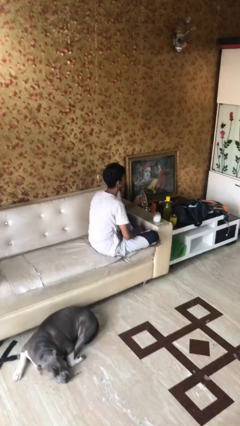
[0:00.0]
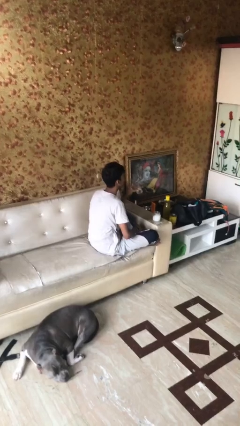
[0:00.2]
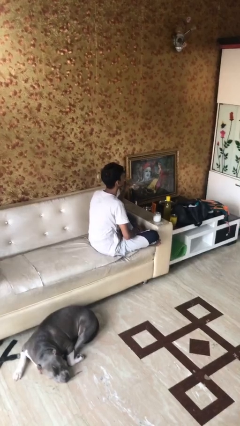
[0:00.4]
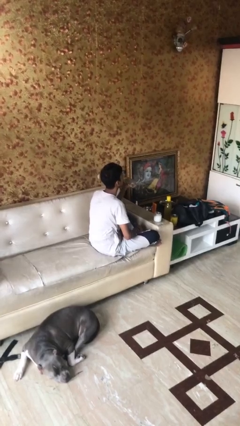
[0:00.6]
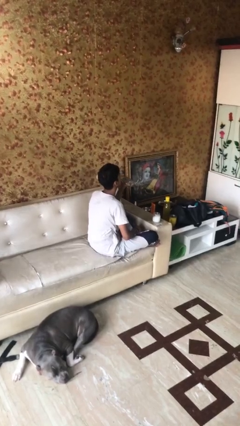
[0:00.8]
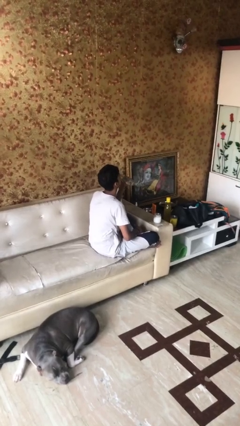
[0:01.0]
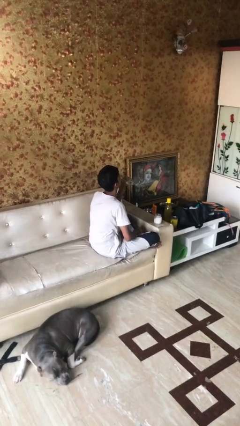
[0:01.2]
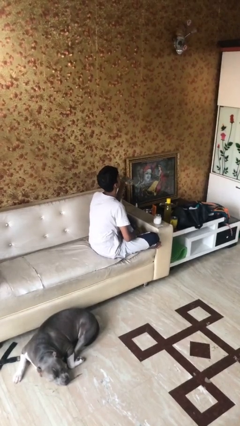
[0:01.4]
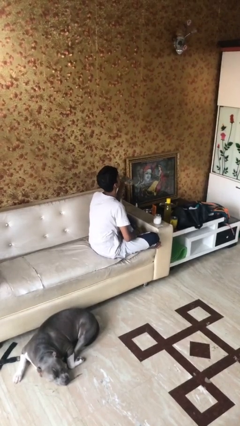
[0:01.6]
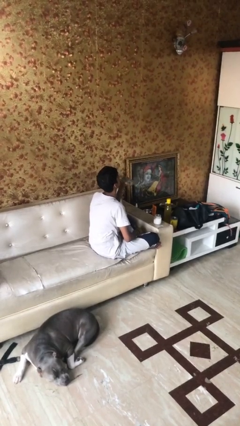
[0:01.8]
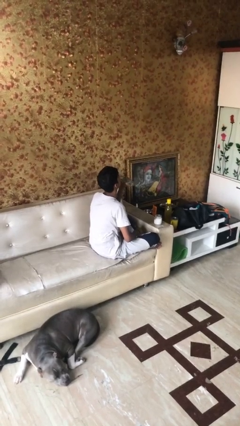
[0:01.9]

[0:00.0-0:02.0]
person drinks from cup

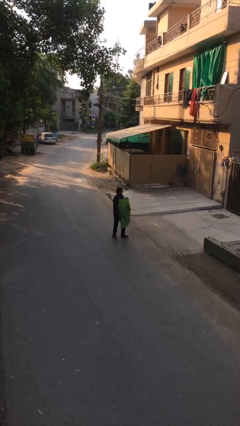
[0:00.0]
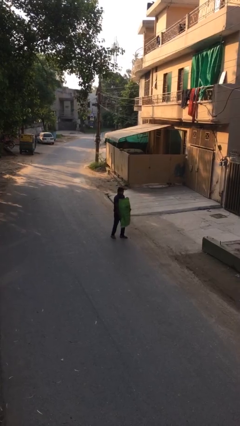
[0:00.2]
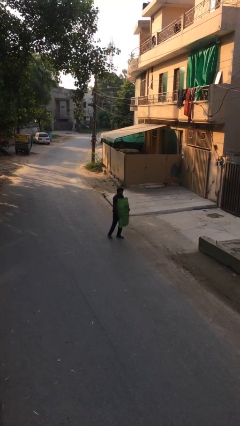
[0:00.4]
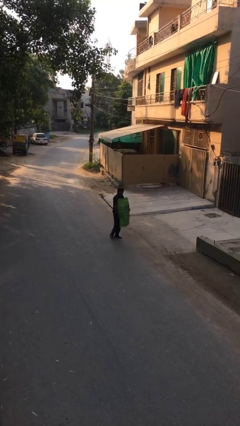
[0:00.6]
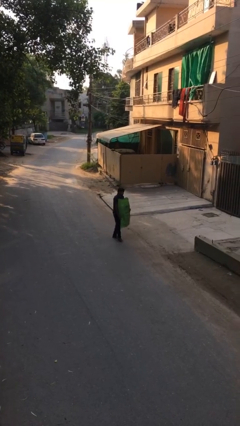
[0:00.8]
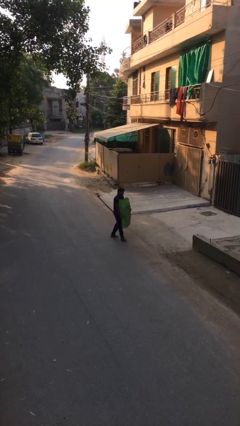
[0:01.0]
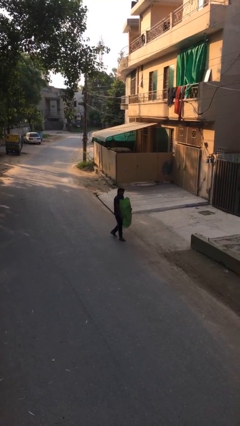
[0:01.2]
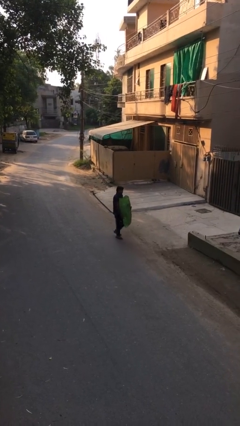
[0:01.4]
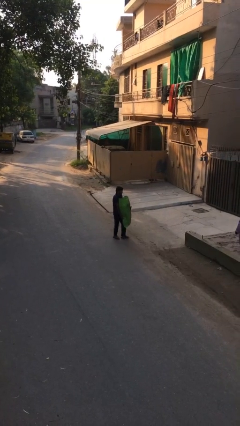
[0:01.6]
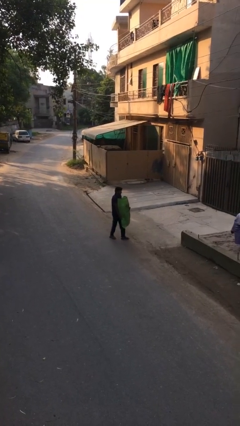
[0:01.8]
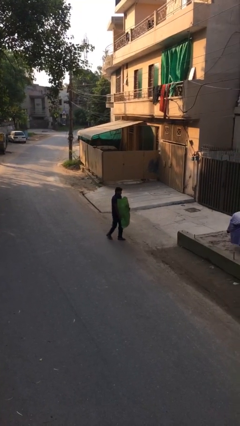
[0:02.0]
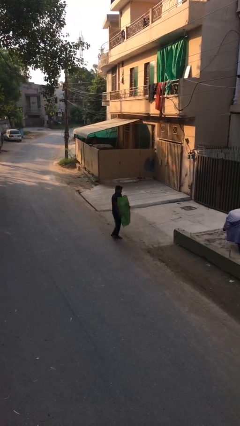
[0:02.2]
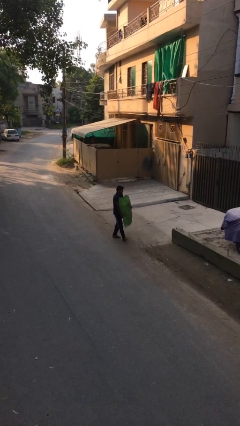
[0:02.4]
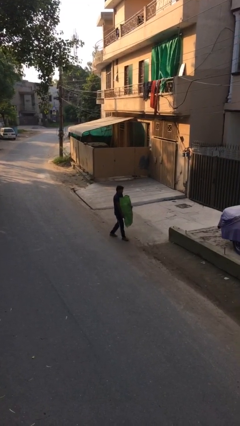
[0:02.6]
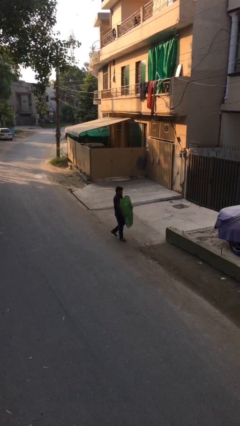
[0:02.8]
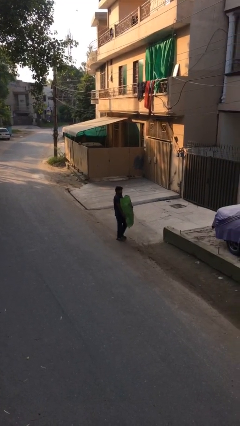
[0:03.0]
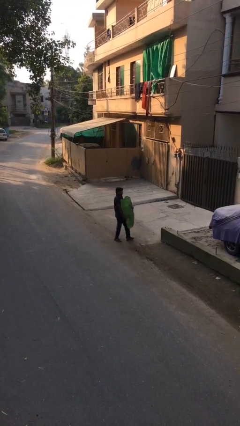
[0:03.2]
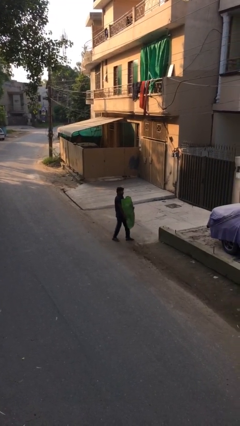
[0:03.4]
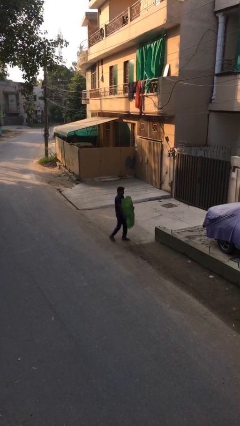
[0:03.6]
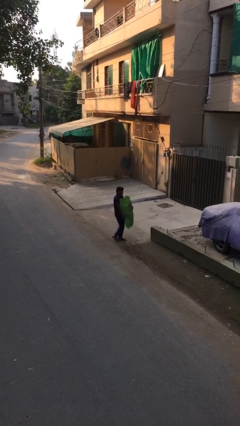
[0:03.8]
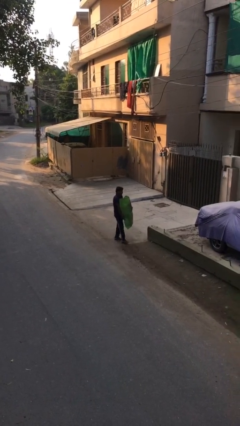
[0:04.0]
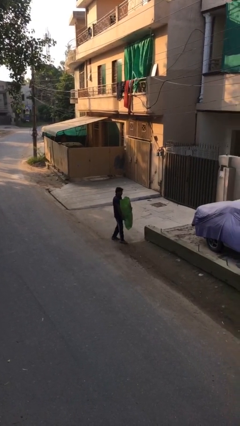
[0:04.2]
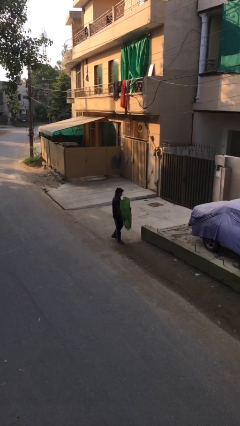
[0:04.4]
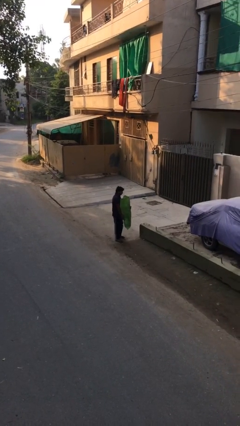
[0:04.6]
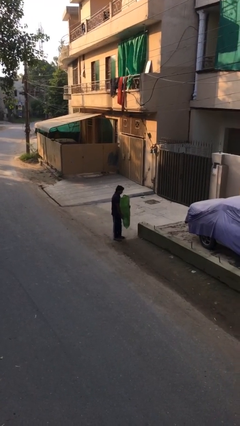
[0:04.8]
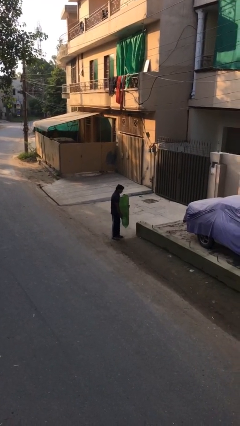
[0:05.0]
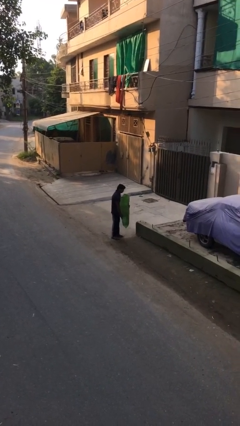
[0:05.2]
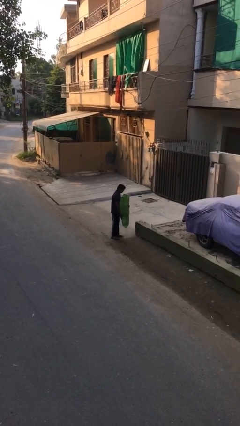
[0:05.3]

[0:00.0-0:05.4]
person carries heavy object

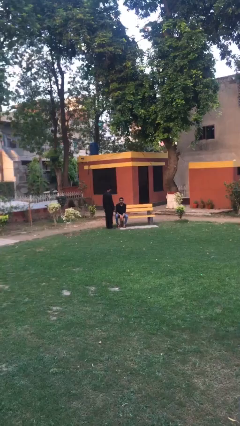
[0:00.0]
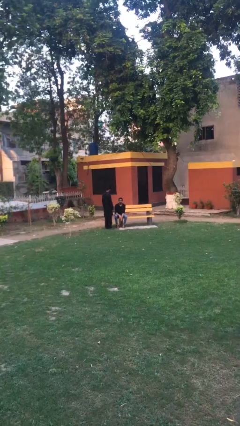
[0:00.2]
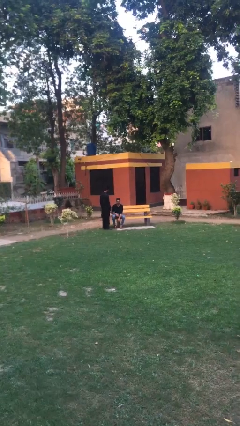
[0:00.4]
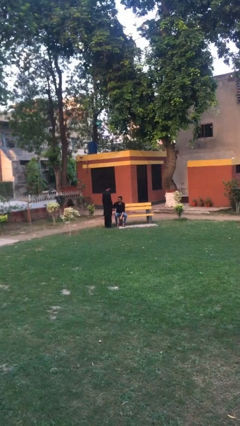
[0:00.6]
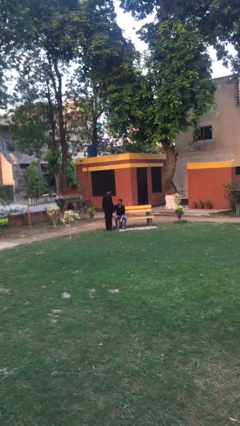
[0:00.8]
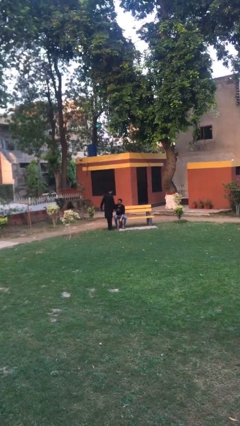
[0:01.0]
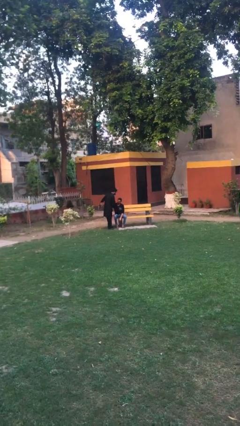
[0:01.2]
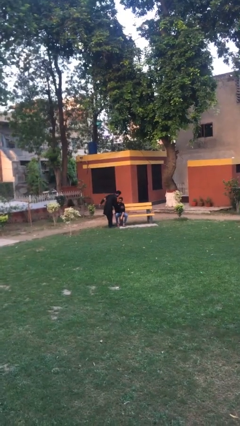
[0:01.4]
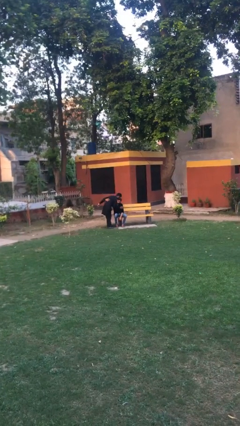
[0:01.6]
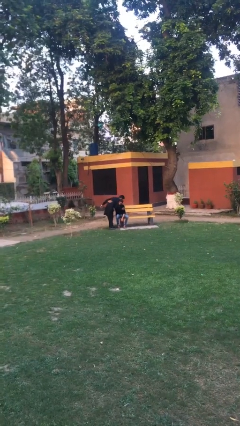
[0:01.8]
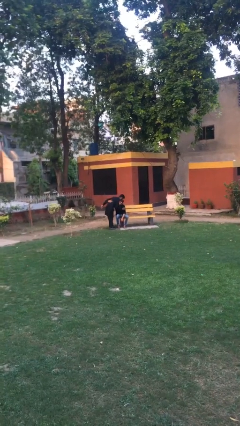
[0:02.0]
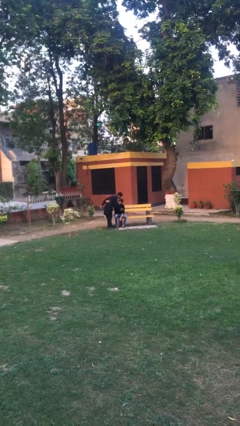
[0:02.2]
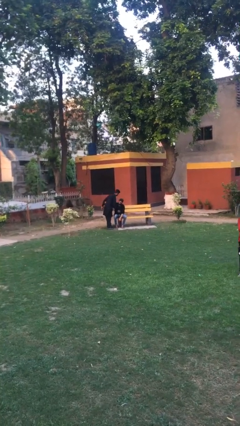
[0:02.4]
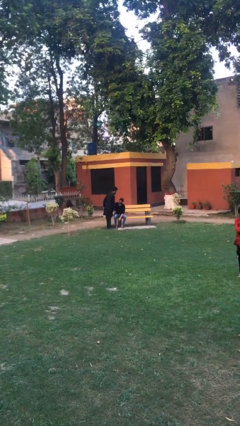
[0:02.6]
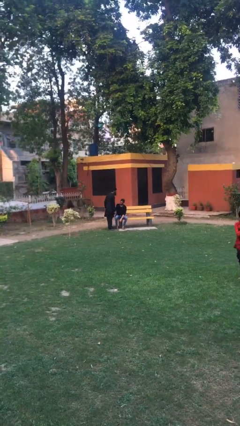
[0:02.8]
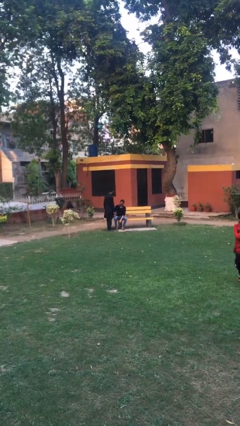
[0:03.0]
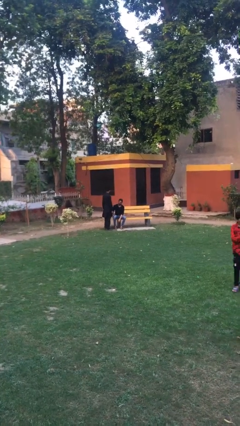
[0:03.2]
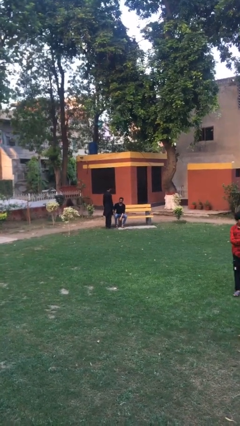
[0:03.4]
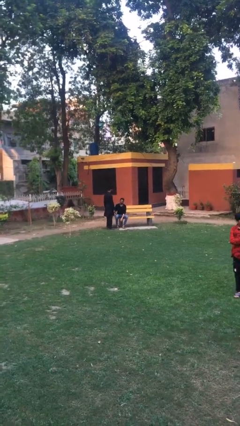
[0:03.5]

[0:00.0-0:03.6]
person embraces person

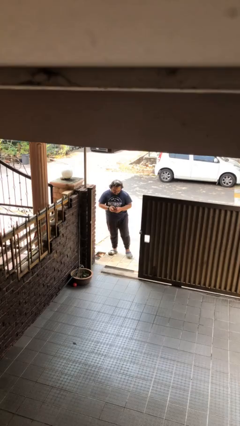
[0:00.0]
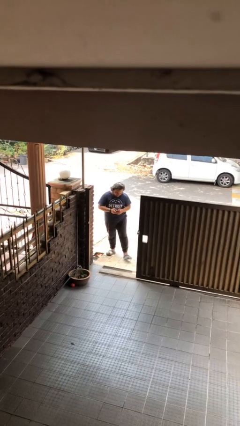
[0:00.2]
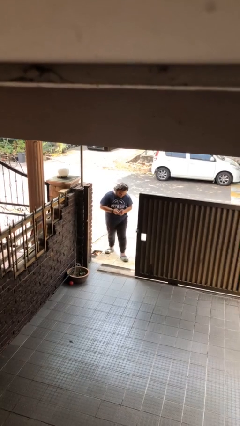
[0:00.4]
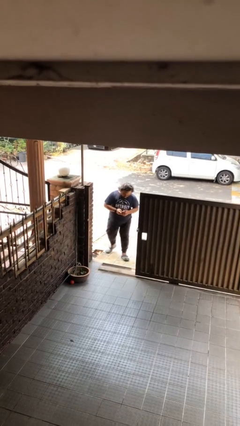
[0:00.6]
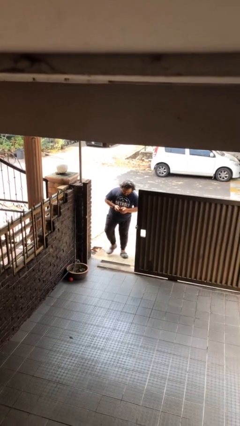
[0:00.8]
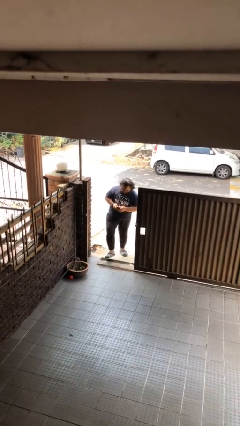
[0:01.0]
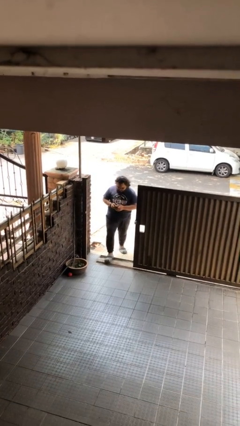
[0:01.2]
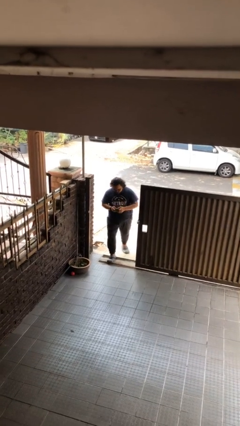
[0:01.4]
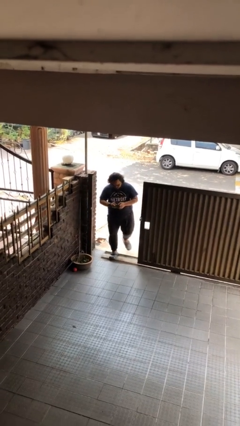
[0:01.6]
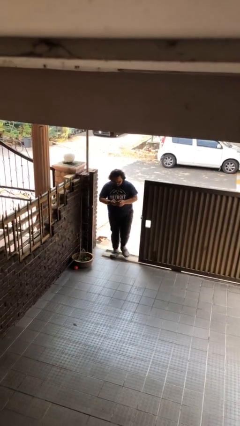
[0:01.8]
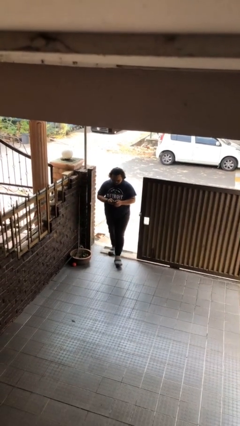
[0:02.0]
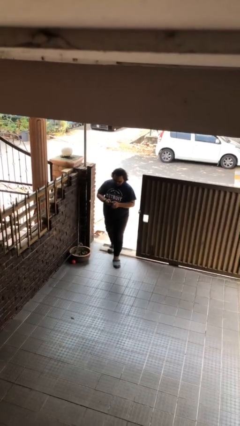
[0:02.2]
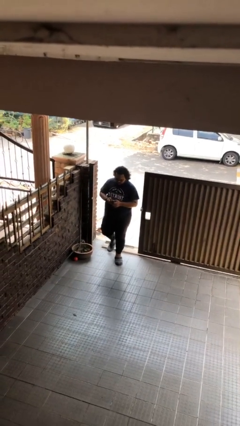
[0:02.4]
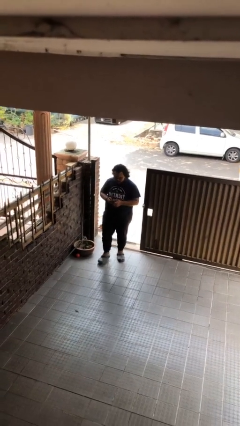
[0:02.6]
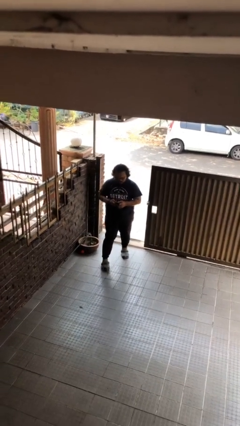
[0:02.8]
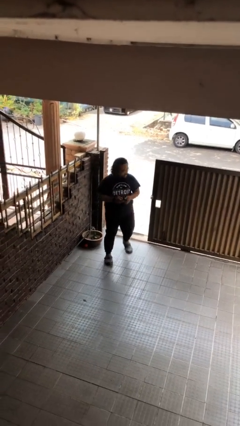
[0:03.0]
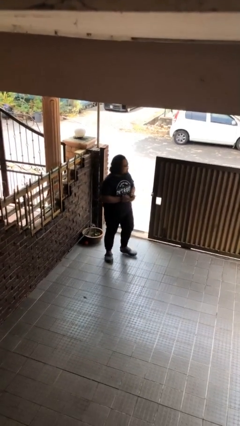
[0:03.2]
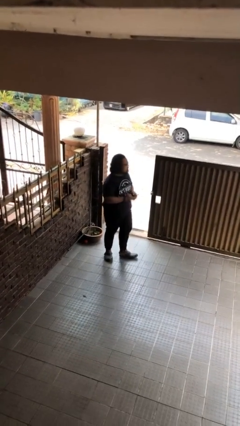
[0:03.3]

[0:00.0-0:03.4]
person enters scene through structure

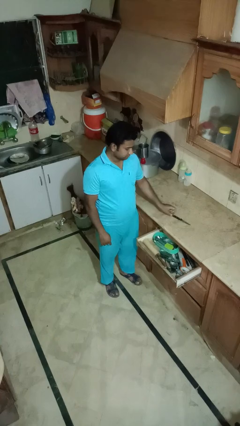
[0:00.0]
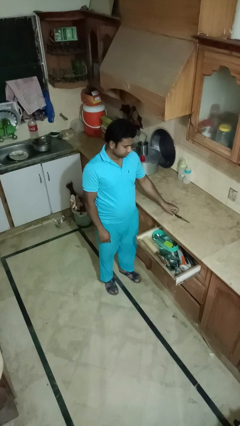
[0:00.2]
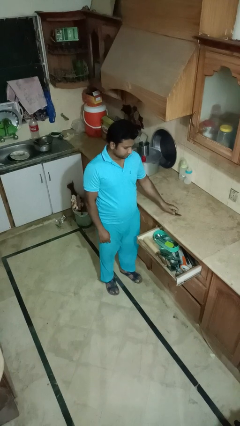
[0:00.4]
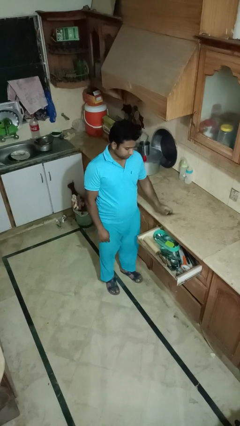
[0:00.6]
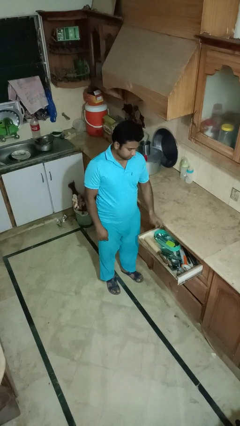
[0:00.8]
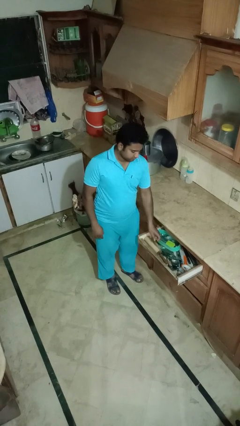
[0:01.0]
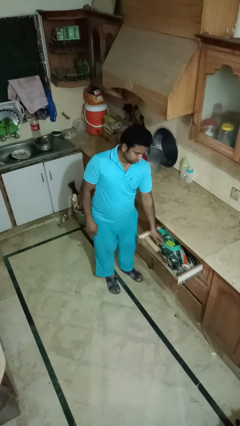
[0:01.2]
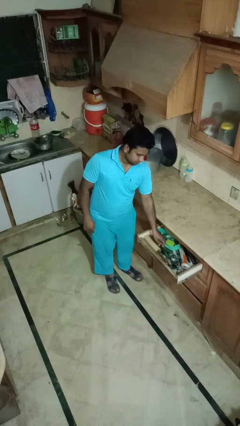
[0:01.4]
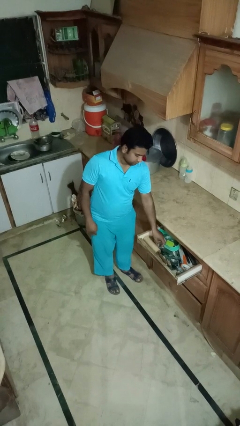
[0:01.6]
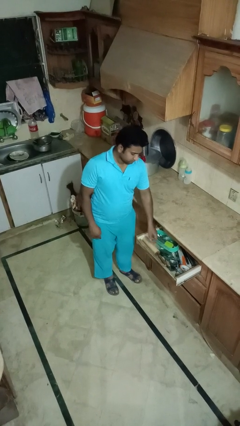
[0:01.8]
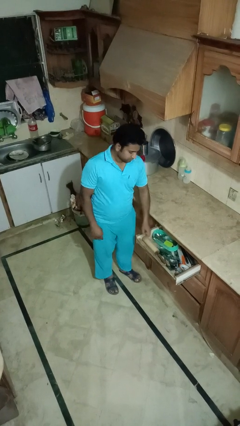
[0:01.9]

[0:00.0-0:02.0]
person puts object into kitchen drawer

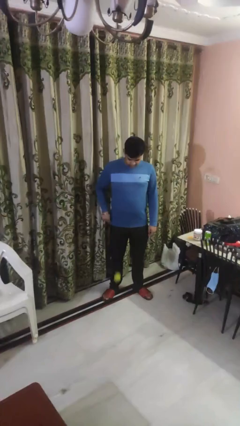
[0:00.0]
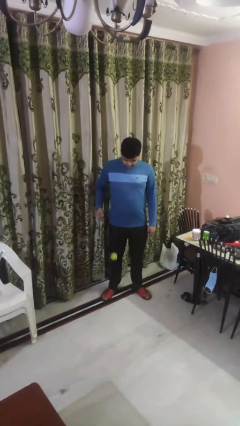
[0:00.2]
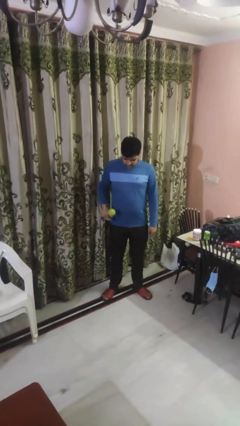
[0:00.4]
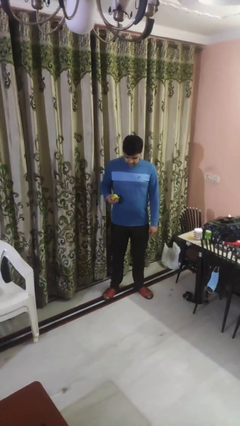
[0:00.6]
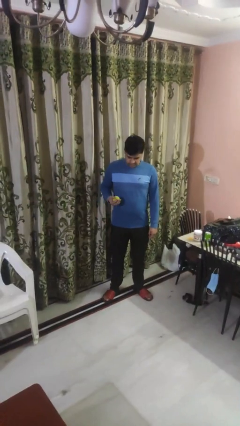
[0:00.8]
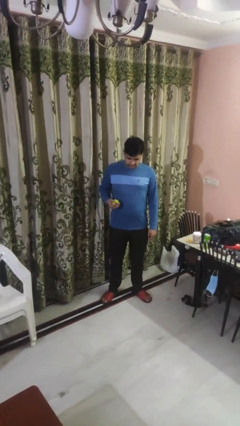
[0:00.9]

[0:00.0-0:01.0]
person bounces ball on floor

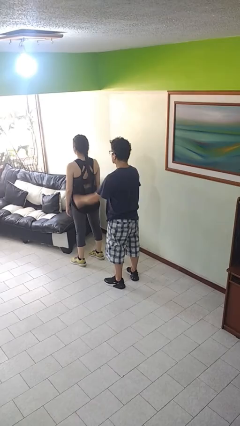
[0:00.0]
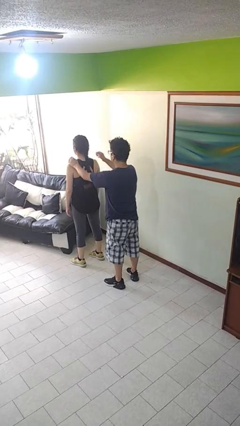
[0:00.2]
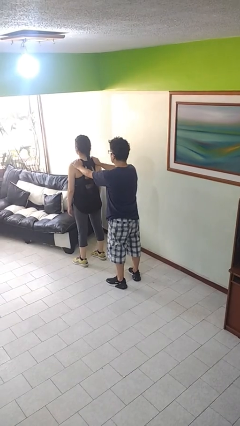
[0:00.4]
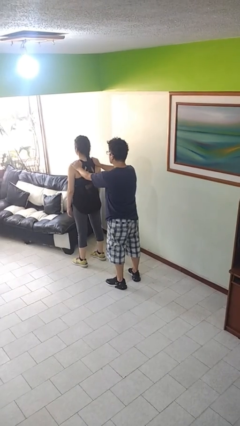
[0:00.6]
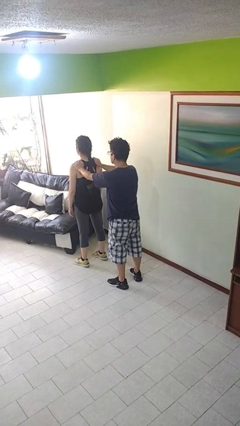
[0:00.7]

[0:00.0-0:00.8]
person grabs person by shoulder
